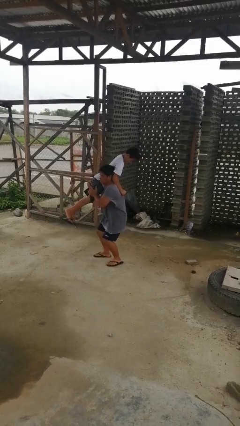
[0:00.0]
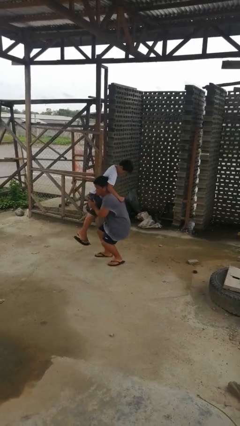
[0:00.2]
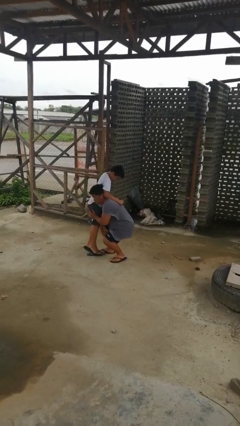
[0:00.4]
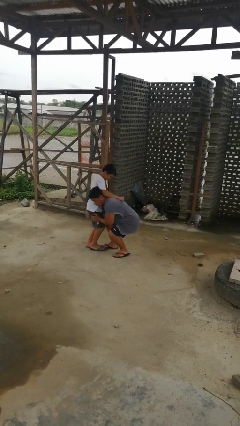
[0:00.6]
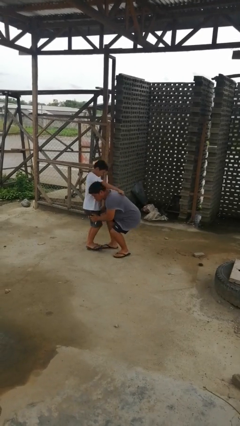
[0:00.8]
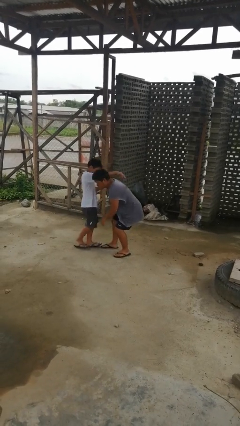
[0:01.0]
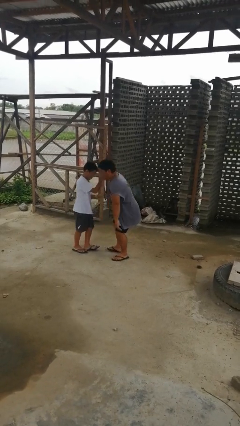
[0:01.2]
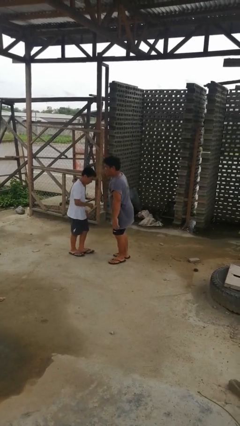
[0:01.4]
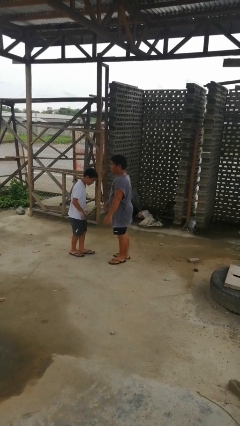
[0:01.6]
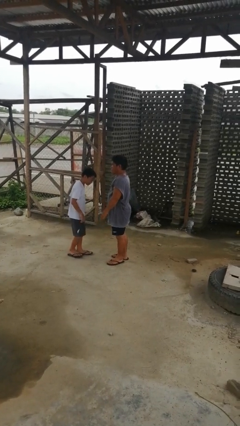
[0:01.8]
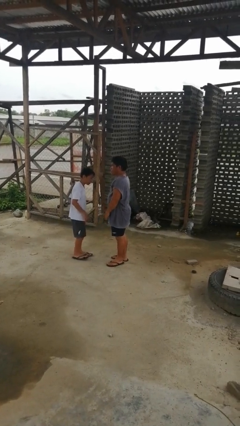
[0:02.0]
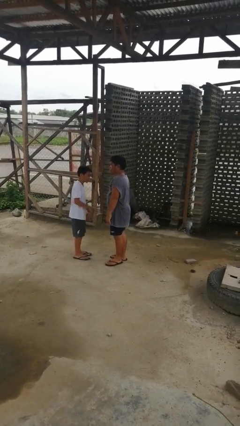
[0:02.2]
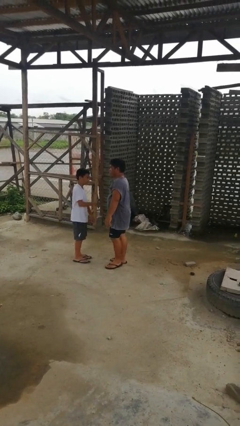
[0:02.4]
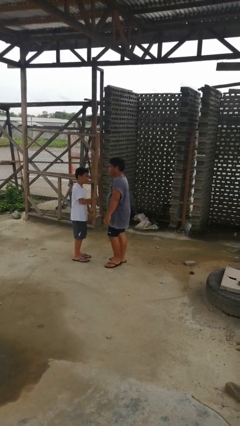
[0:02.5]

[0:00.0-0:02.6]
person puts down person

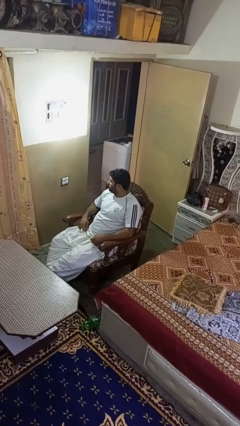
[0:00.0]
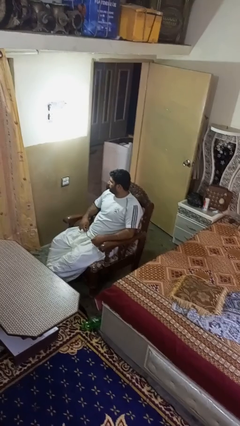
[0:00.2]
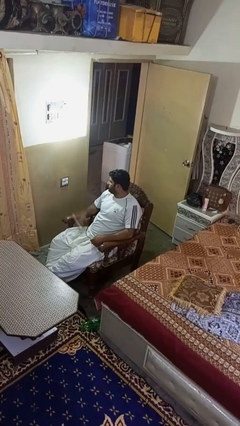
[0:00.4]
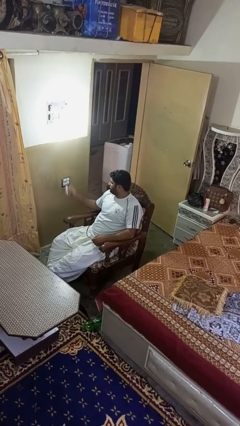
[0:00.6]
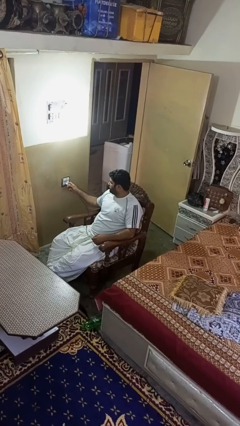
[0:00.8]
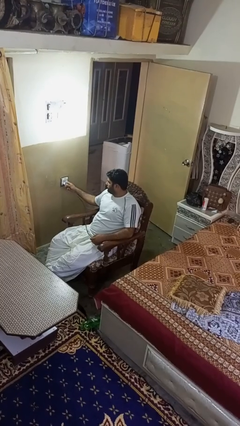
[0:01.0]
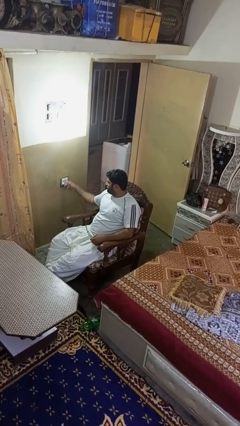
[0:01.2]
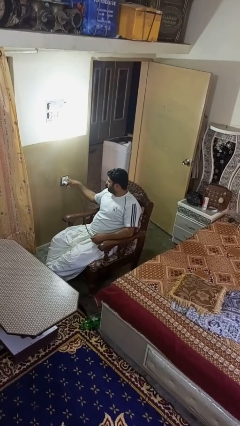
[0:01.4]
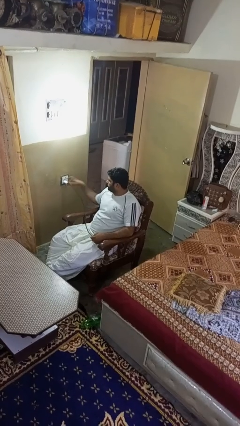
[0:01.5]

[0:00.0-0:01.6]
person plugs into electrical socket

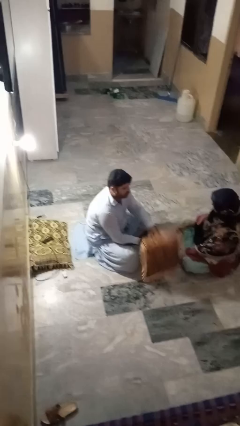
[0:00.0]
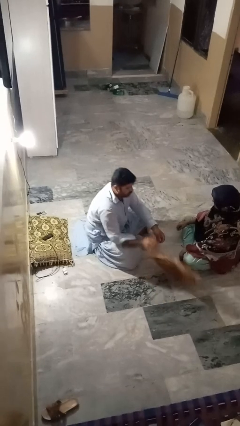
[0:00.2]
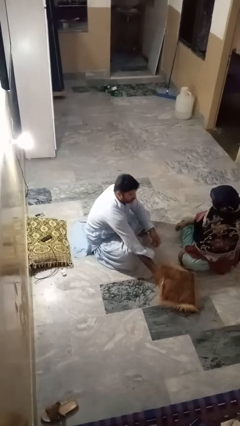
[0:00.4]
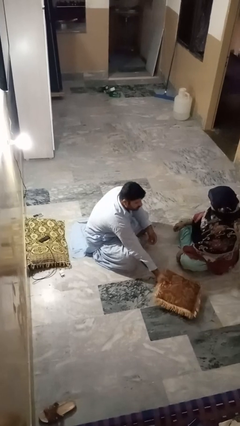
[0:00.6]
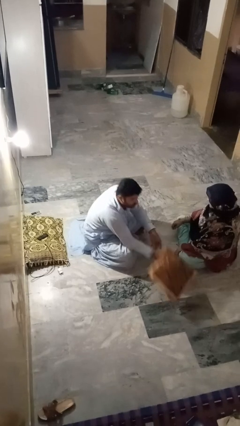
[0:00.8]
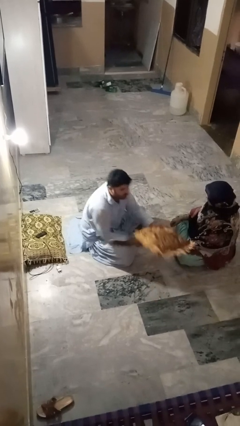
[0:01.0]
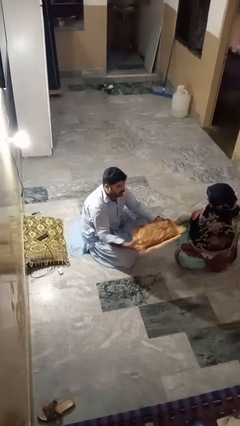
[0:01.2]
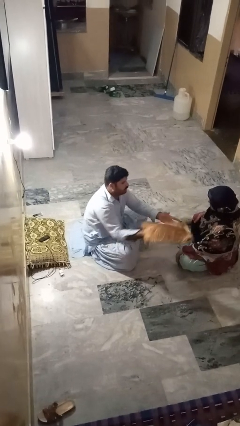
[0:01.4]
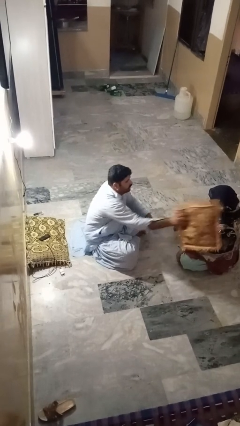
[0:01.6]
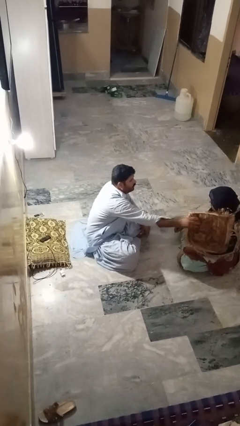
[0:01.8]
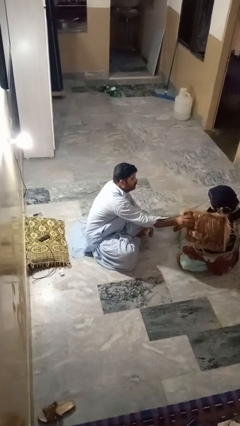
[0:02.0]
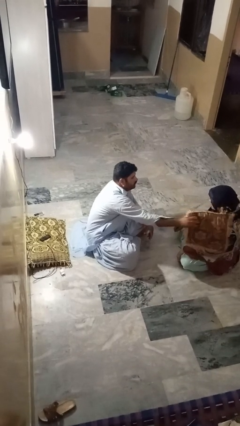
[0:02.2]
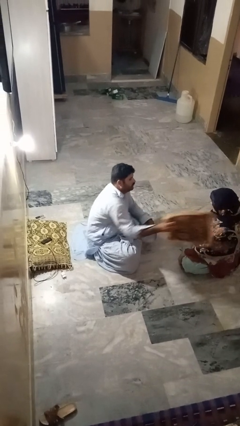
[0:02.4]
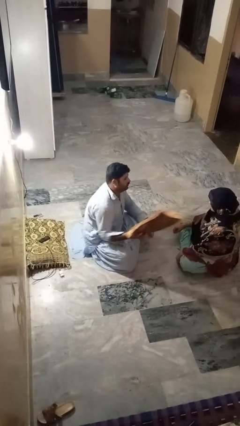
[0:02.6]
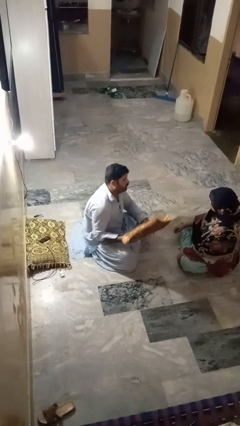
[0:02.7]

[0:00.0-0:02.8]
person hits person with pillow

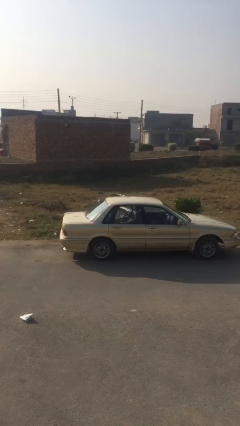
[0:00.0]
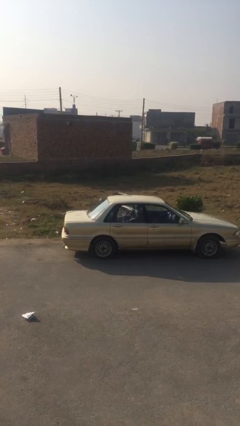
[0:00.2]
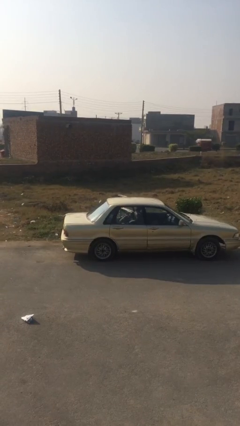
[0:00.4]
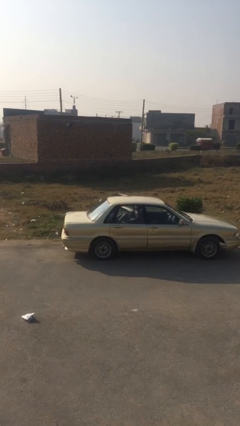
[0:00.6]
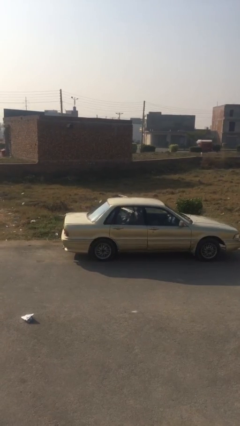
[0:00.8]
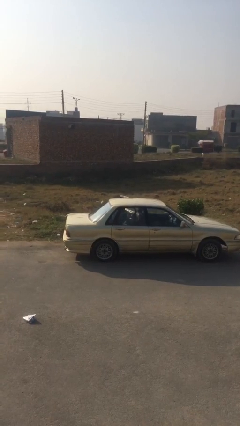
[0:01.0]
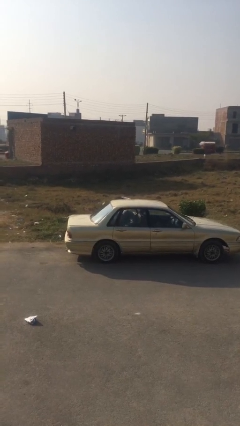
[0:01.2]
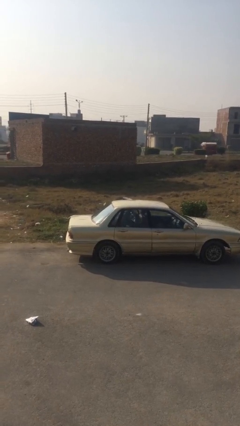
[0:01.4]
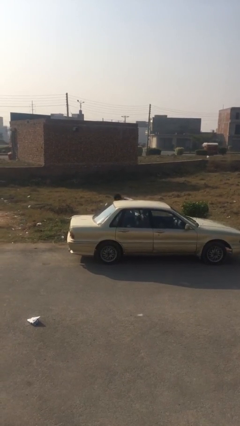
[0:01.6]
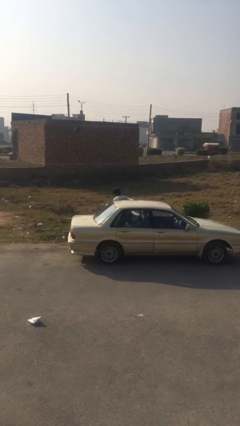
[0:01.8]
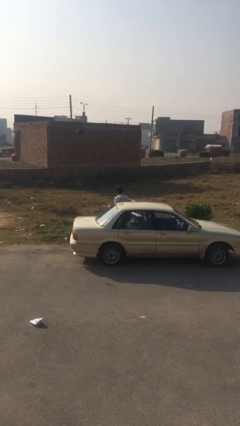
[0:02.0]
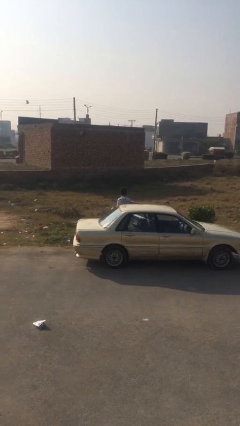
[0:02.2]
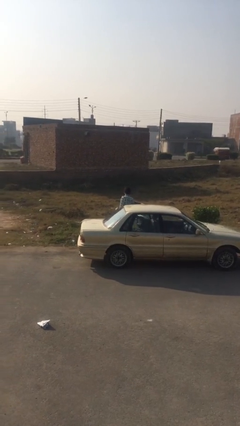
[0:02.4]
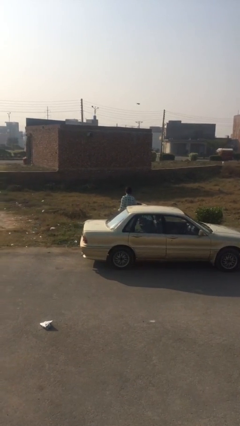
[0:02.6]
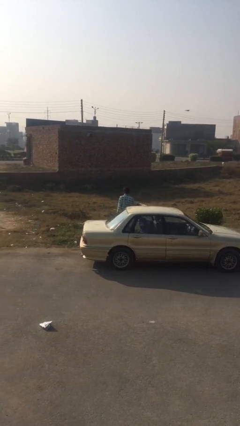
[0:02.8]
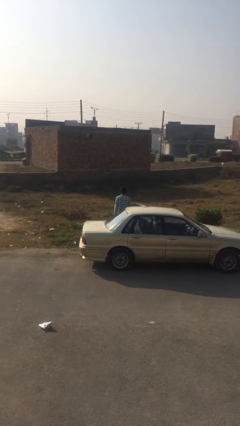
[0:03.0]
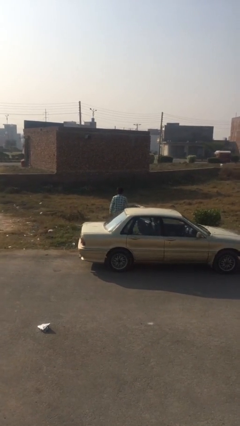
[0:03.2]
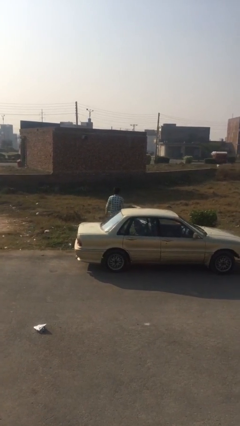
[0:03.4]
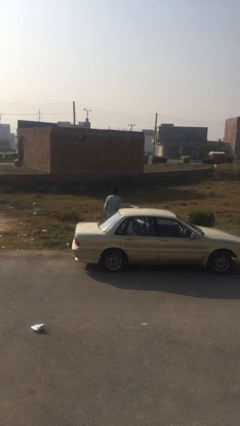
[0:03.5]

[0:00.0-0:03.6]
person exits car

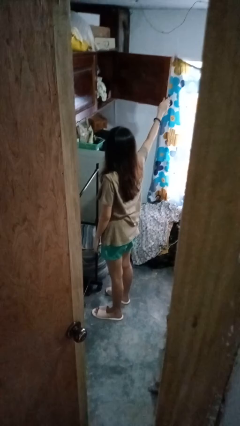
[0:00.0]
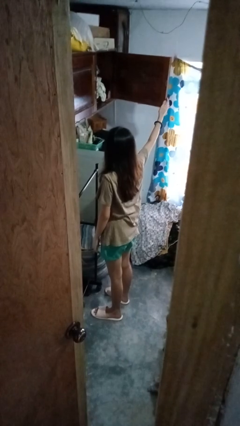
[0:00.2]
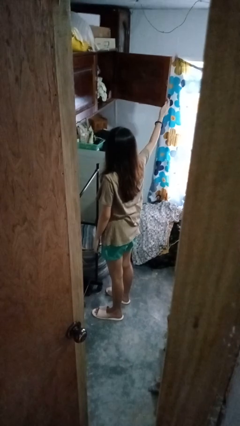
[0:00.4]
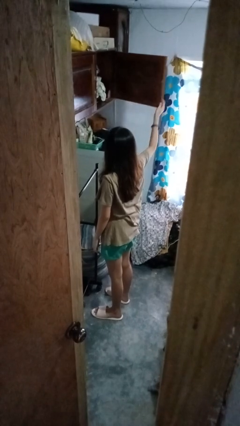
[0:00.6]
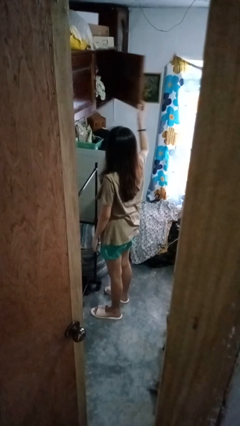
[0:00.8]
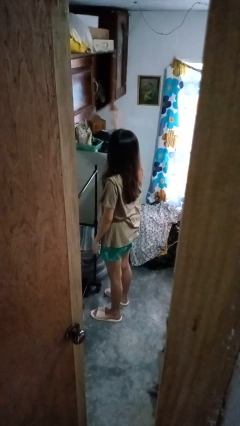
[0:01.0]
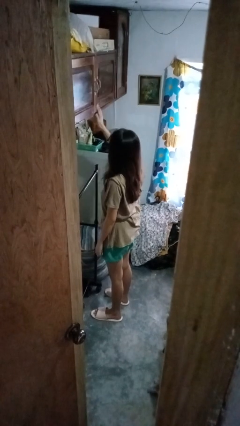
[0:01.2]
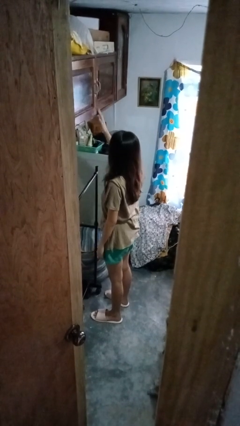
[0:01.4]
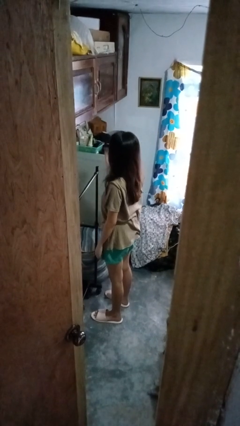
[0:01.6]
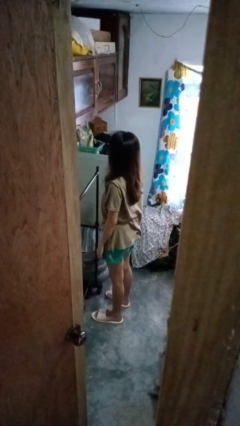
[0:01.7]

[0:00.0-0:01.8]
person closes closet door

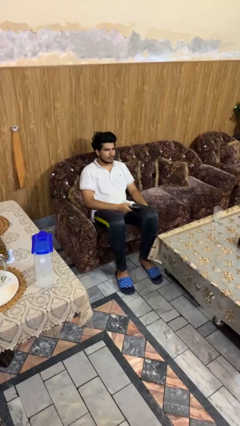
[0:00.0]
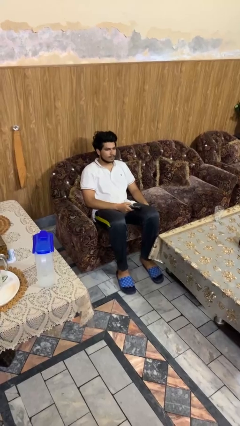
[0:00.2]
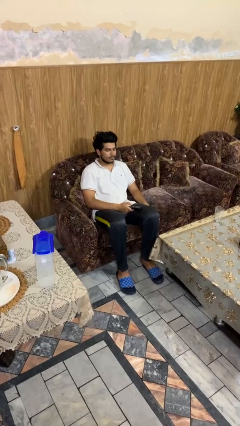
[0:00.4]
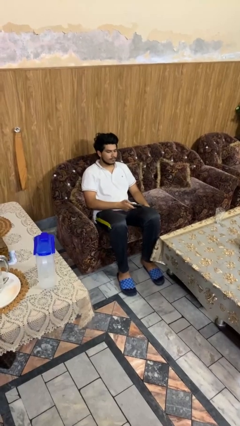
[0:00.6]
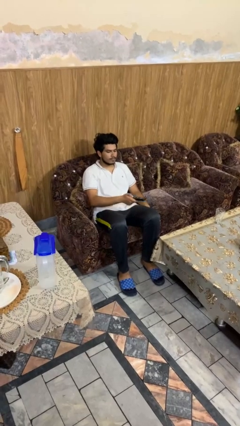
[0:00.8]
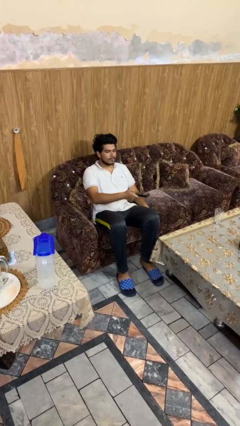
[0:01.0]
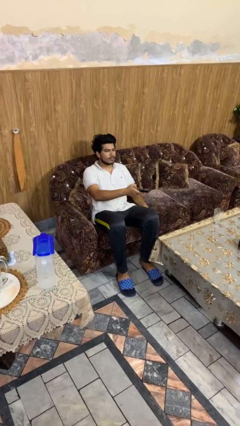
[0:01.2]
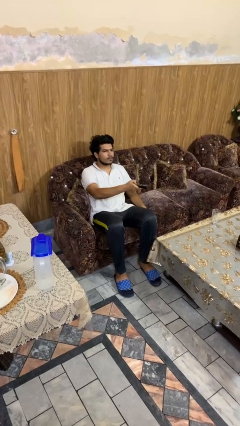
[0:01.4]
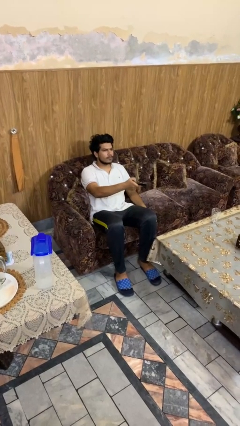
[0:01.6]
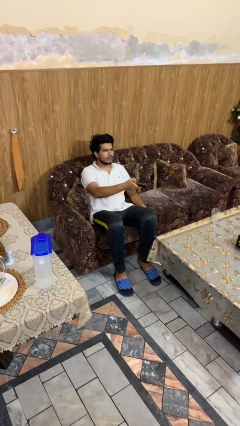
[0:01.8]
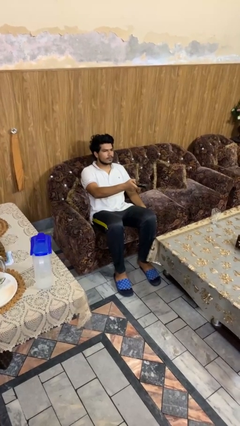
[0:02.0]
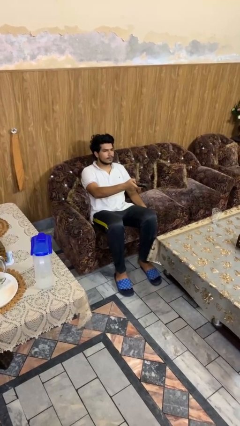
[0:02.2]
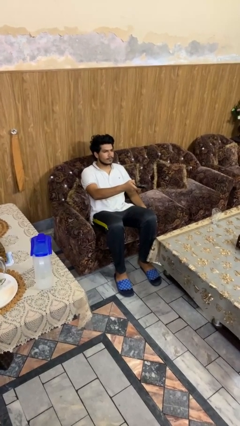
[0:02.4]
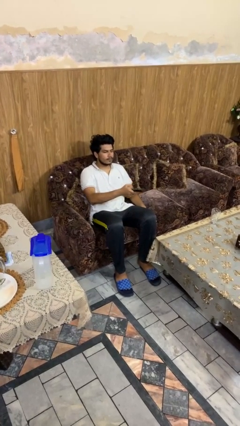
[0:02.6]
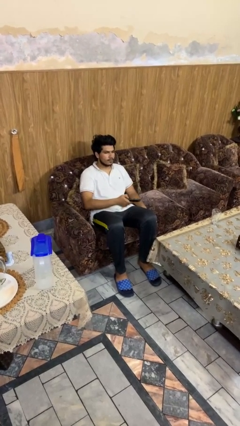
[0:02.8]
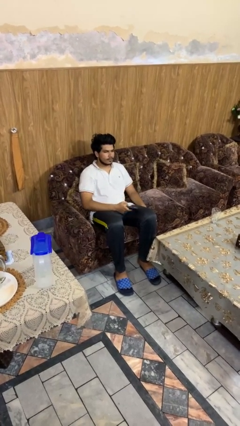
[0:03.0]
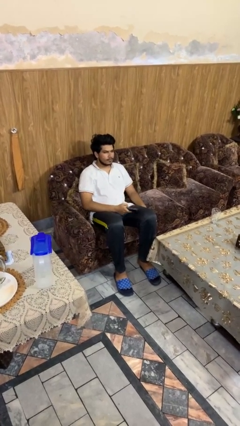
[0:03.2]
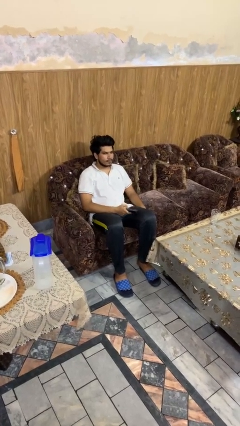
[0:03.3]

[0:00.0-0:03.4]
person uses television remote

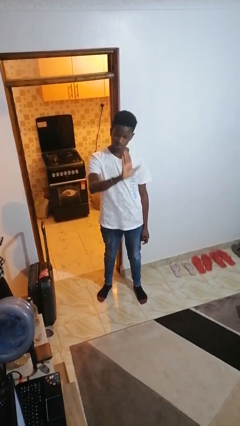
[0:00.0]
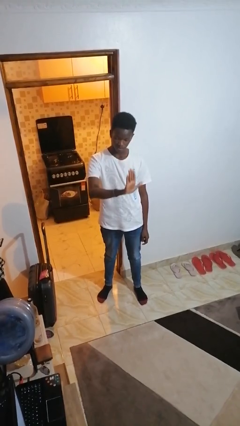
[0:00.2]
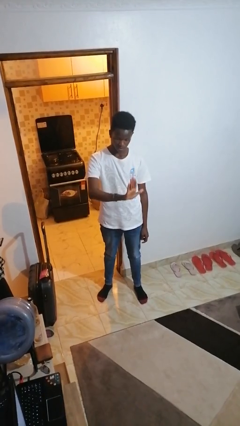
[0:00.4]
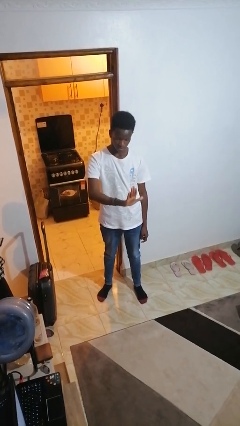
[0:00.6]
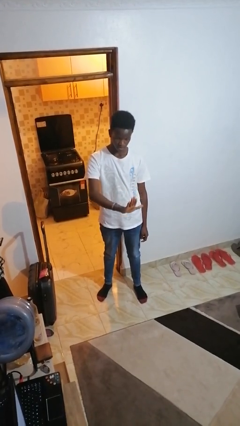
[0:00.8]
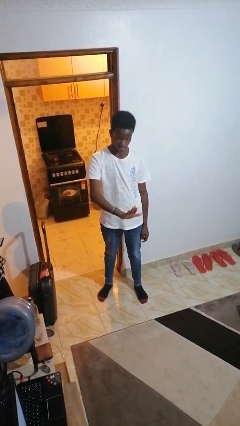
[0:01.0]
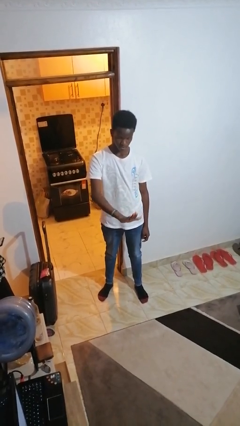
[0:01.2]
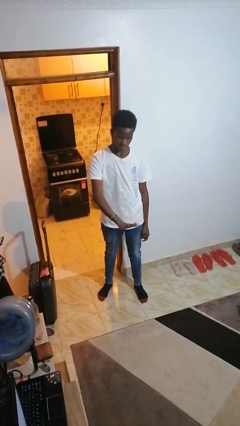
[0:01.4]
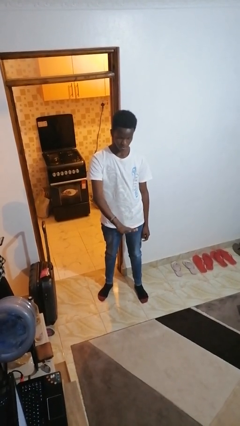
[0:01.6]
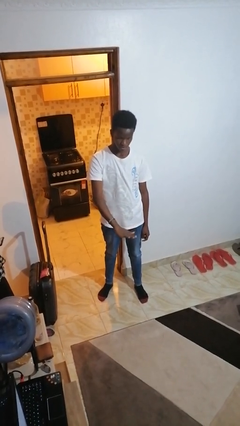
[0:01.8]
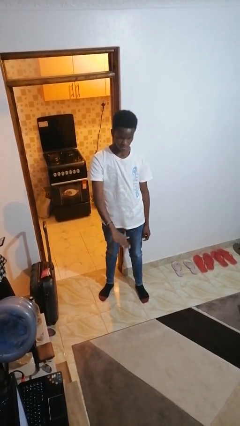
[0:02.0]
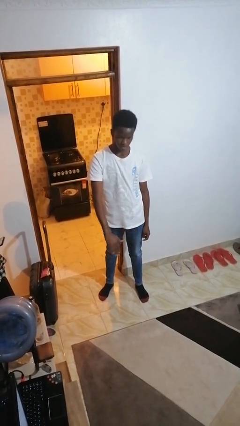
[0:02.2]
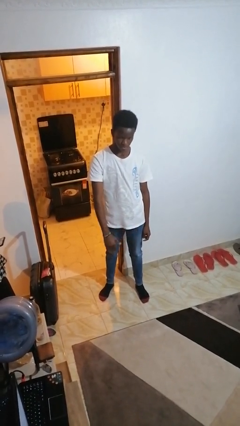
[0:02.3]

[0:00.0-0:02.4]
person gestures swipe down
